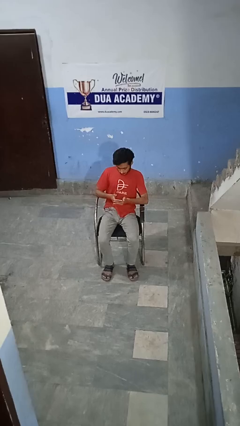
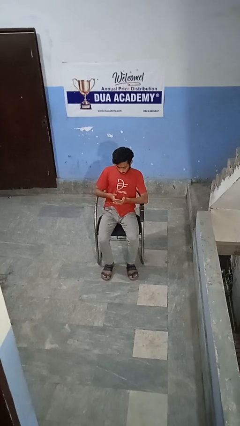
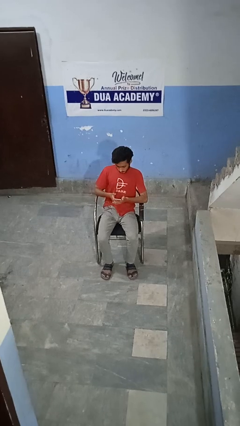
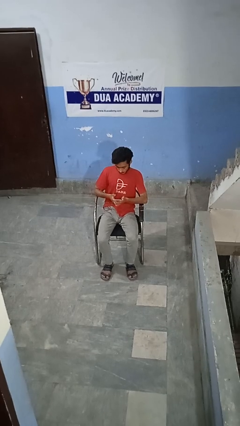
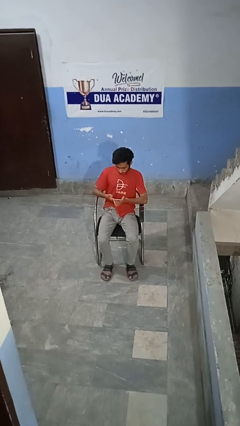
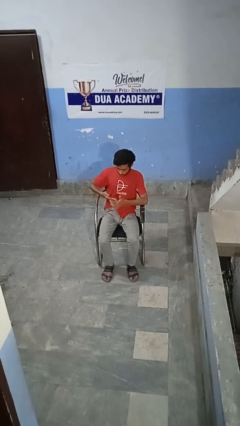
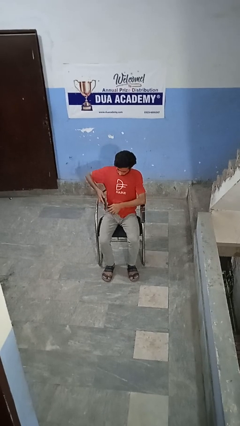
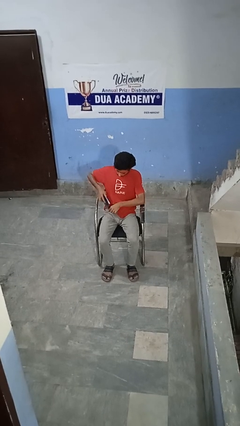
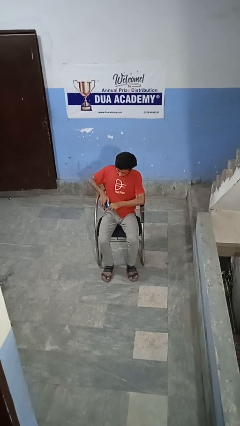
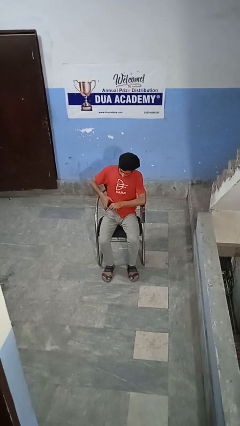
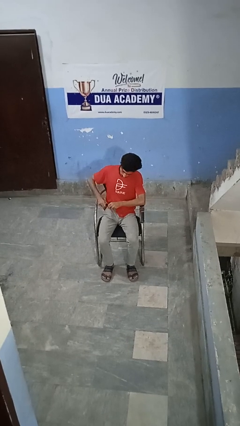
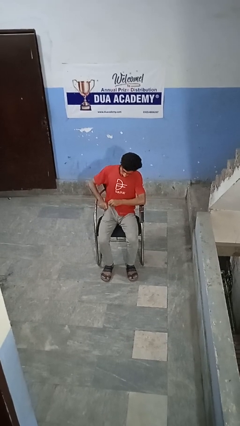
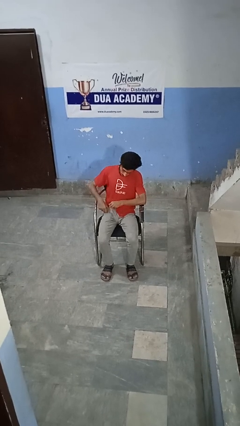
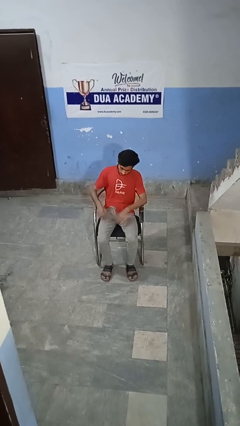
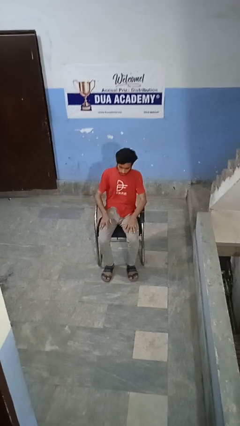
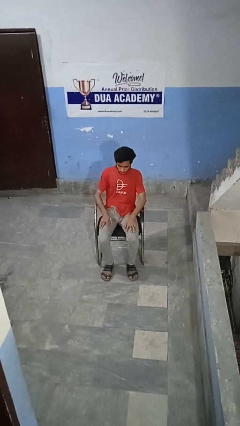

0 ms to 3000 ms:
person puts phone into pocket

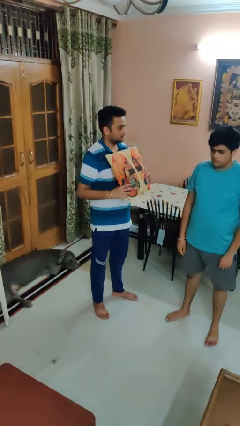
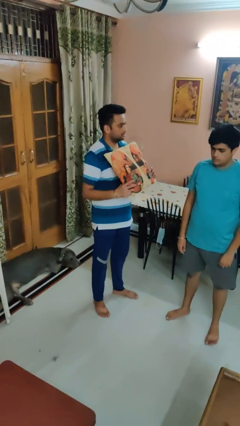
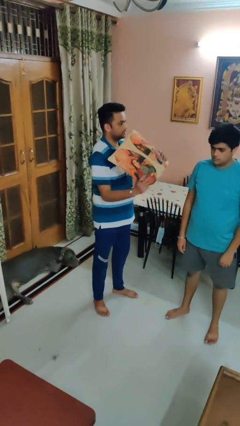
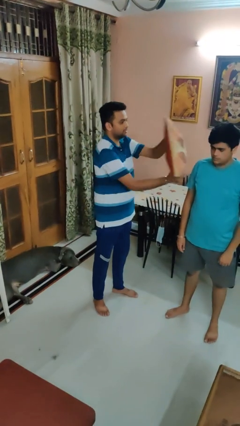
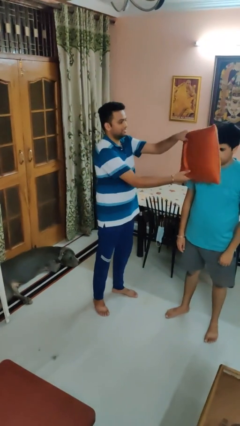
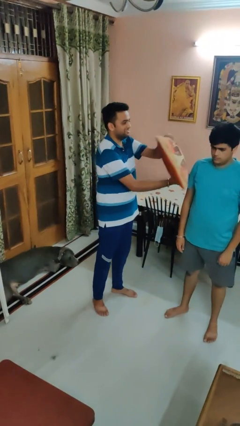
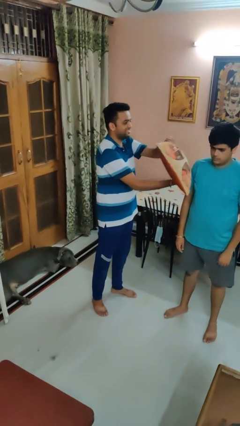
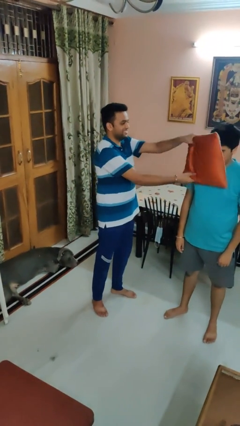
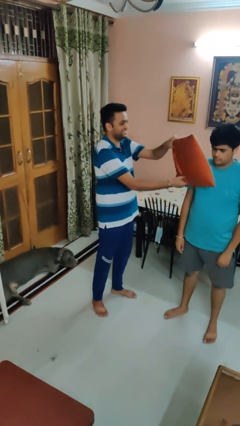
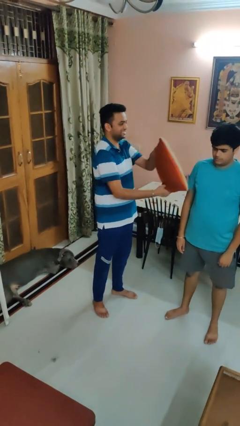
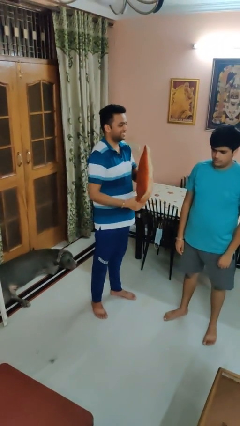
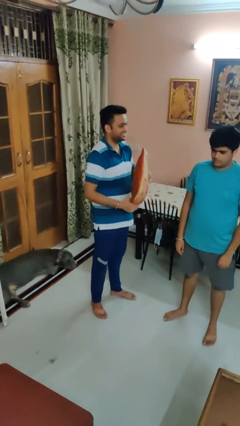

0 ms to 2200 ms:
person hits person with pillow

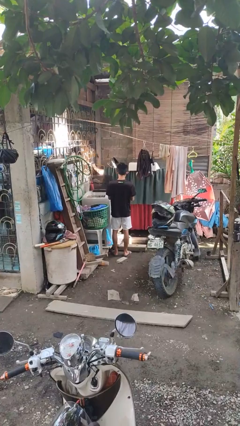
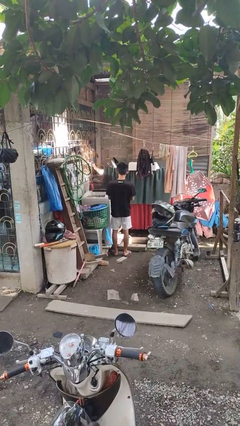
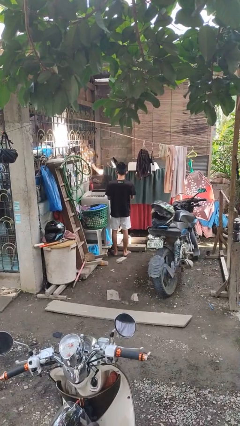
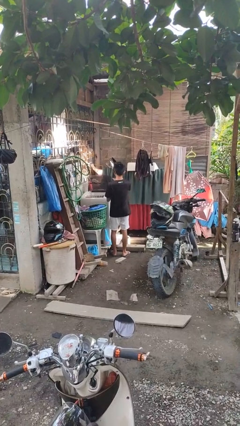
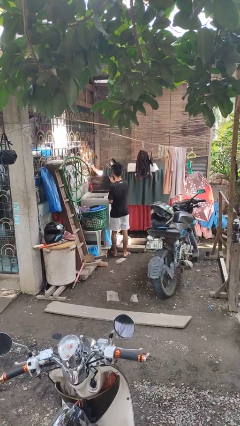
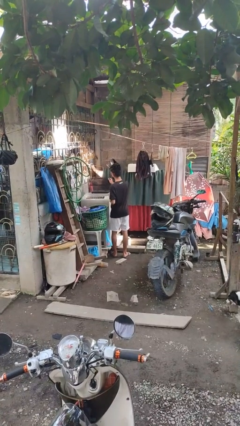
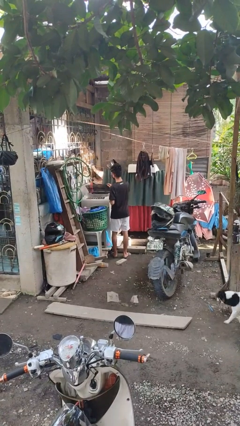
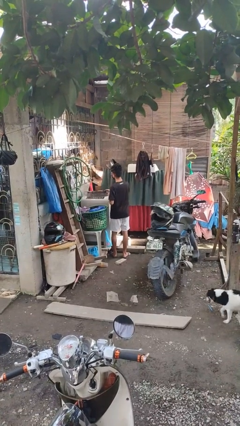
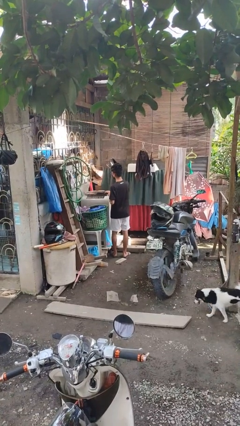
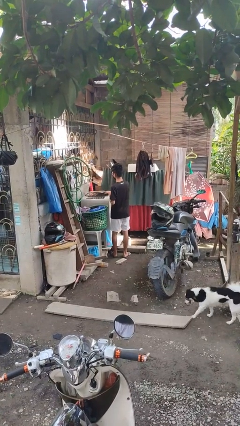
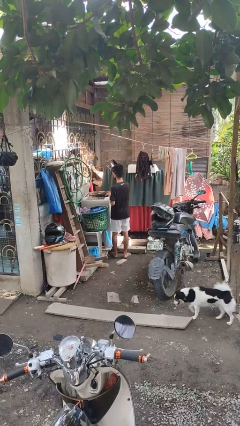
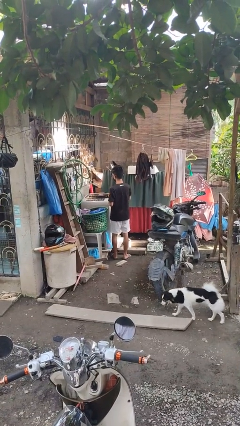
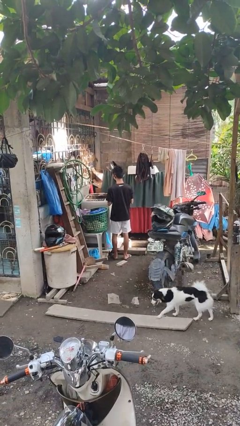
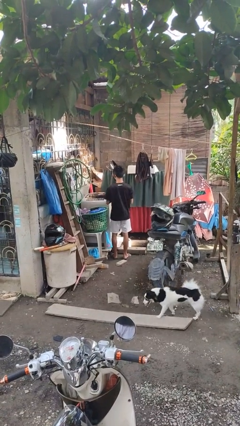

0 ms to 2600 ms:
person closes clothes washer

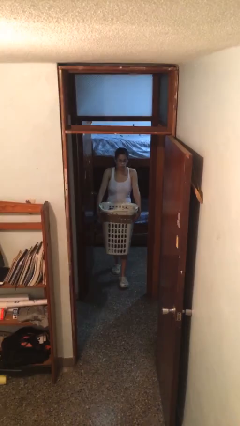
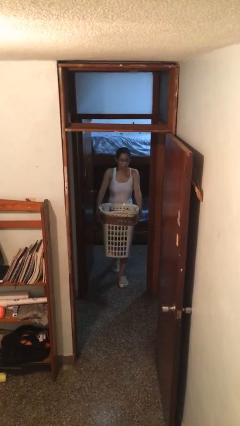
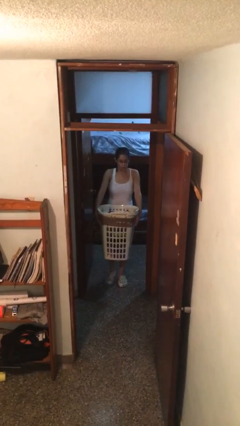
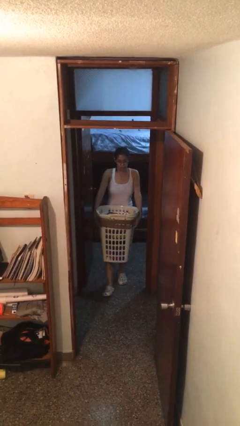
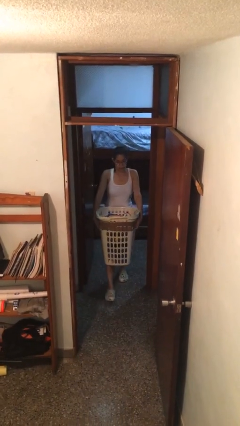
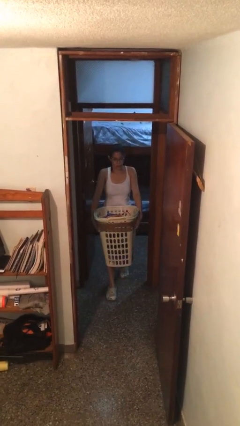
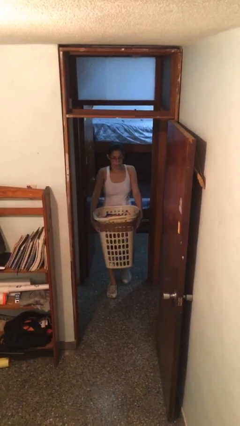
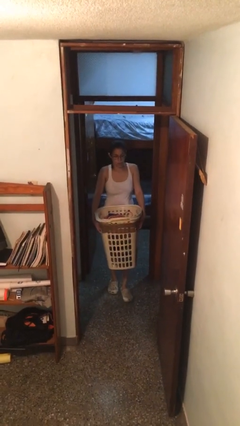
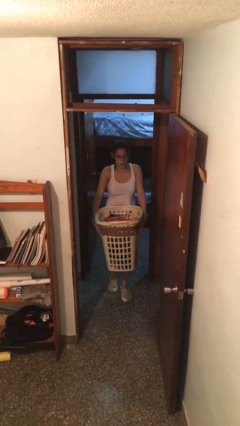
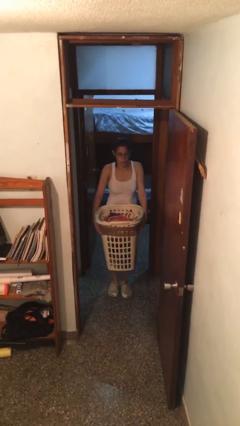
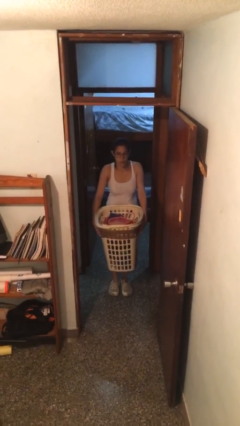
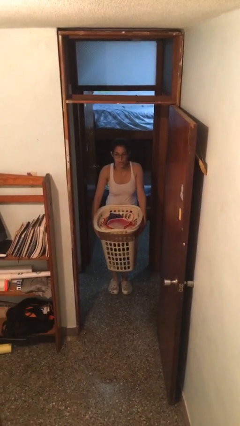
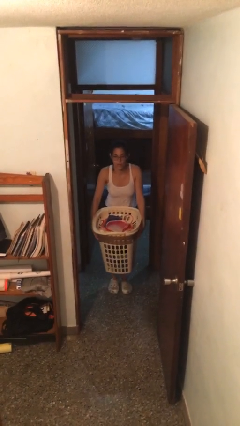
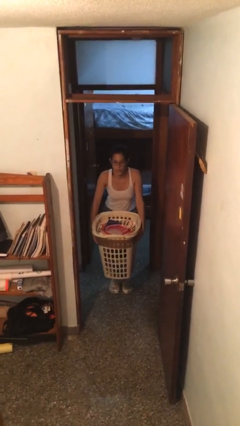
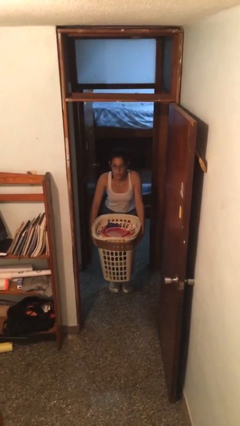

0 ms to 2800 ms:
person carries heavy object

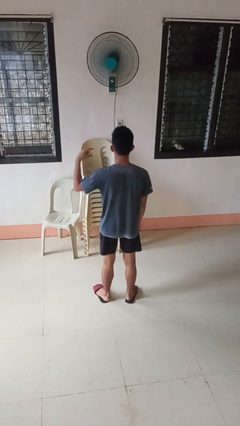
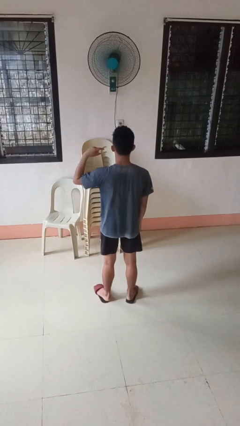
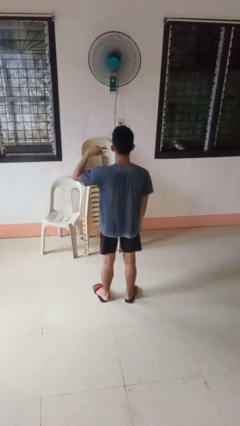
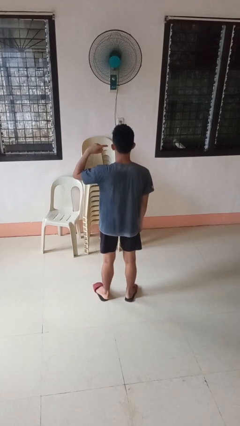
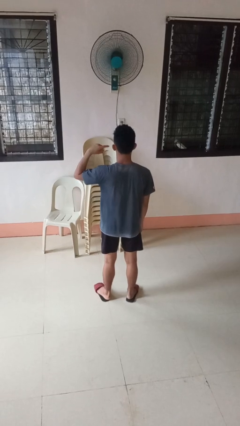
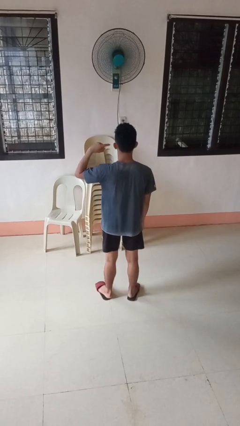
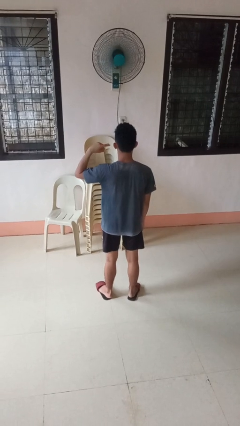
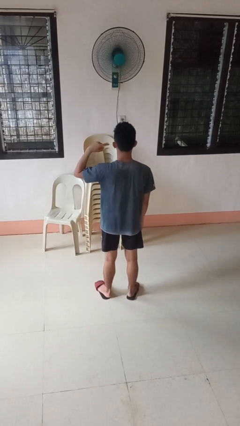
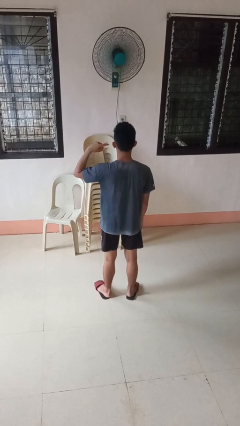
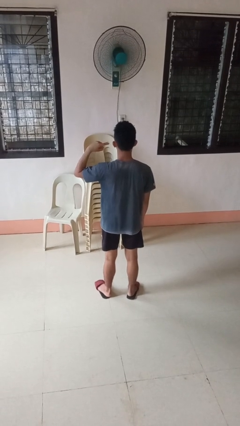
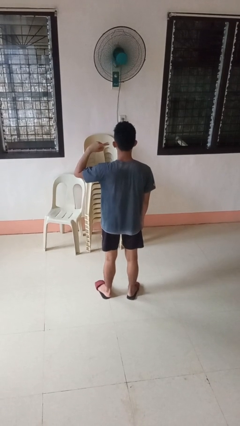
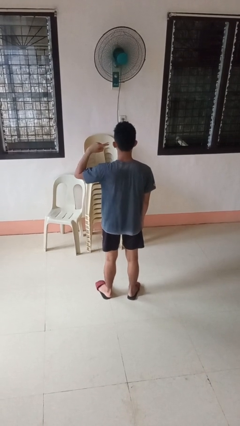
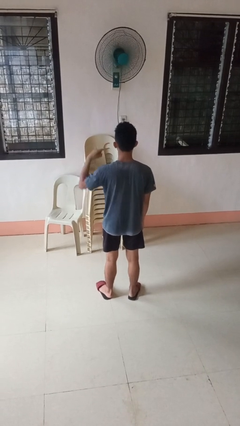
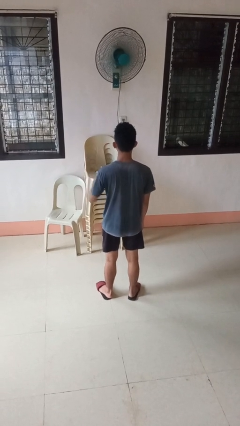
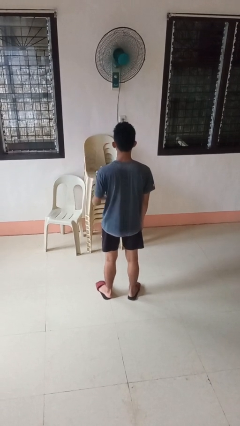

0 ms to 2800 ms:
person gestures listen closely

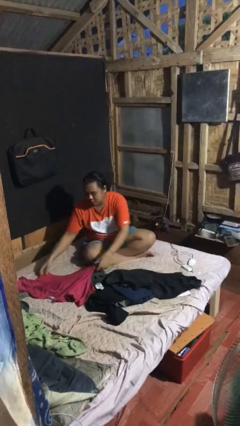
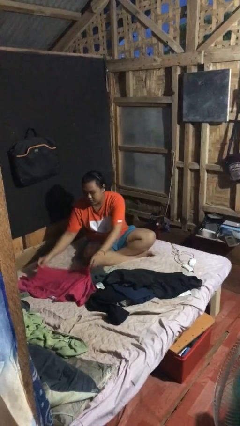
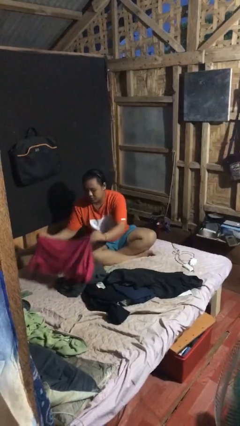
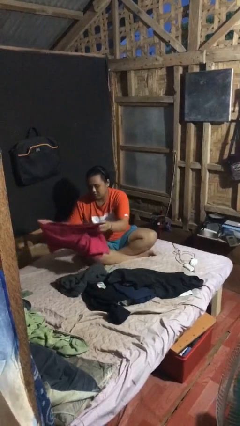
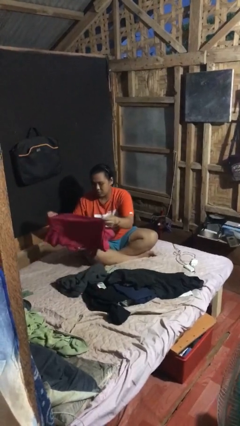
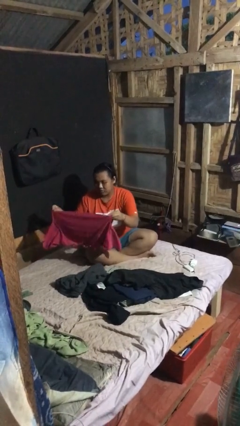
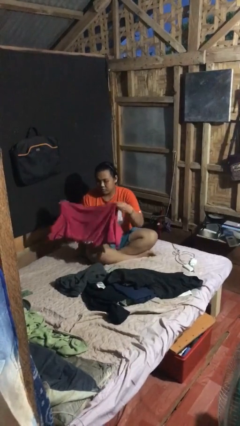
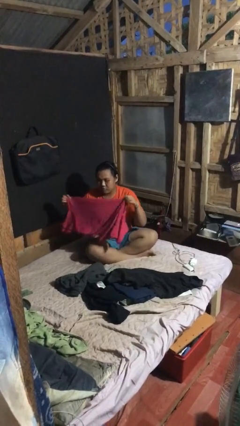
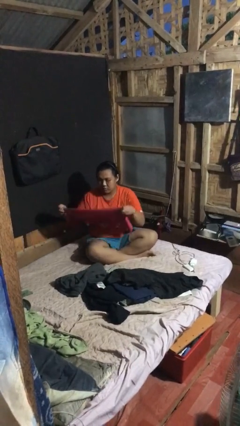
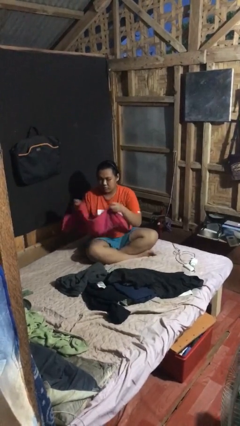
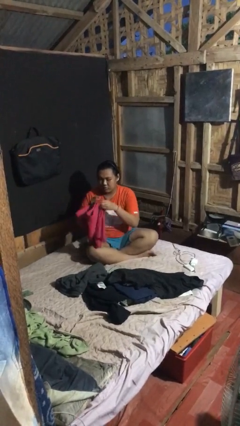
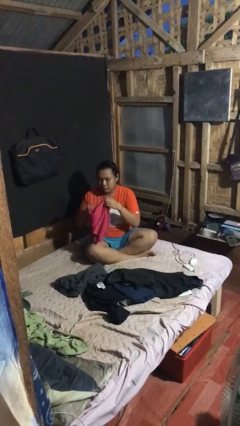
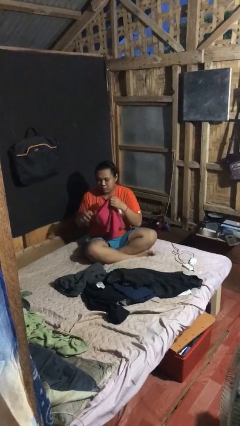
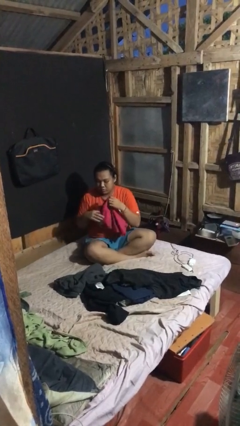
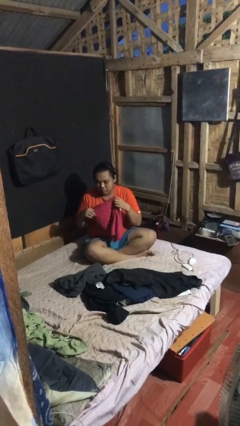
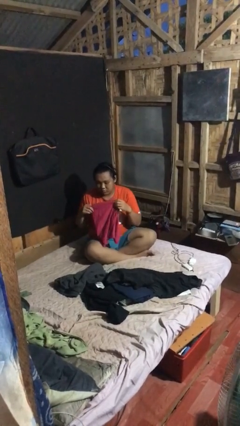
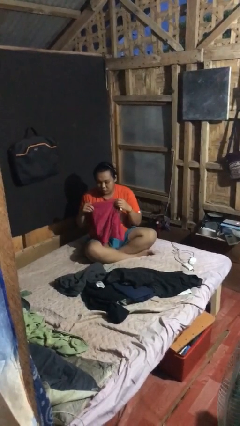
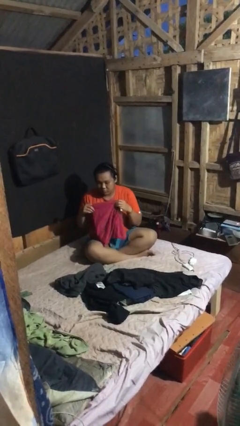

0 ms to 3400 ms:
person folds shirt

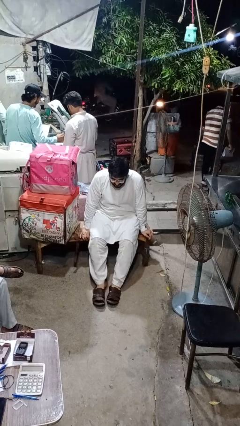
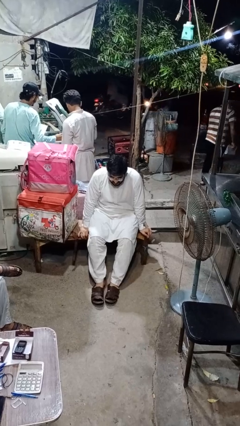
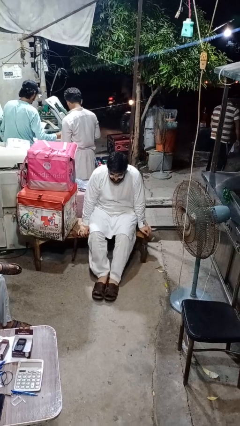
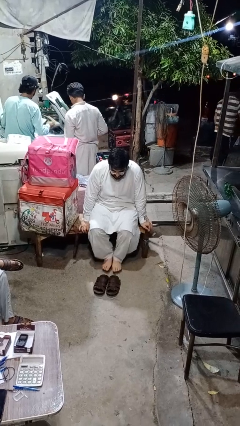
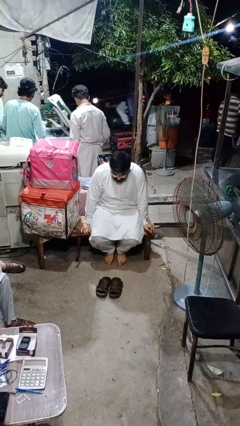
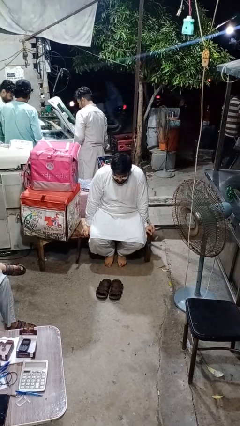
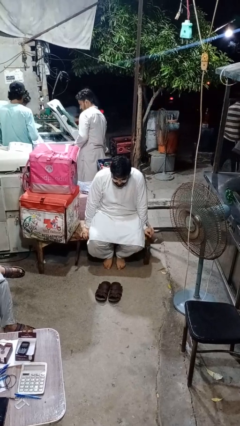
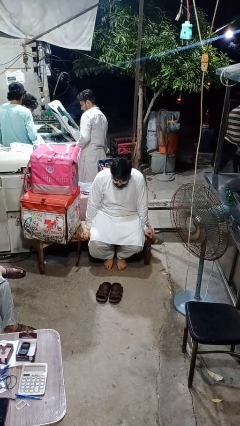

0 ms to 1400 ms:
person takes off shoes
